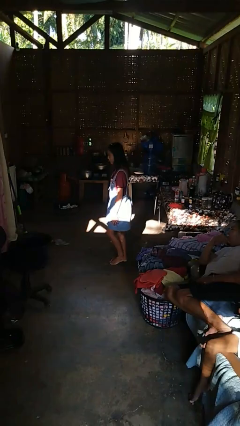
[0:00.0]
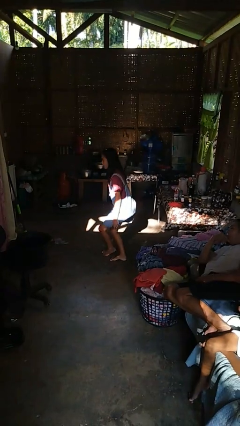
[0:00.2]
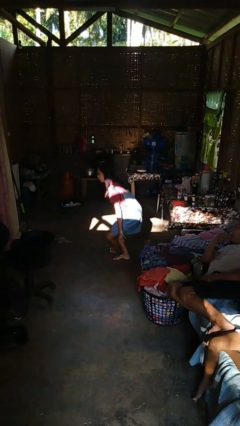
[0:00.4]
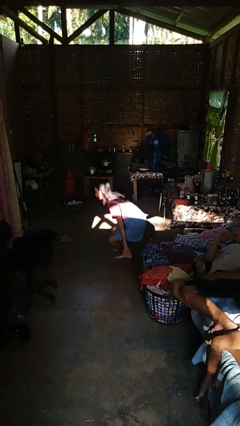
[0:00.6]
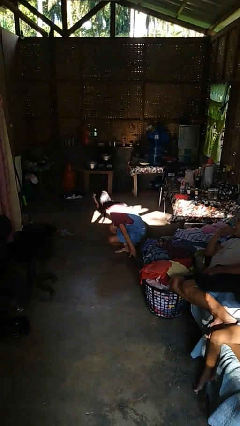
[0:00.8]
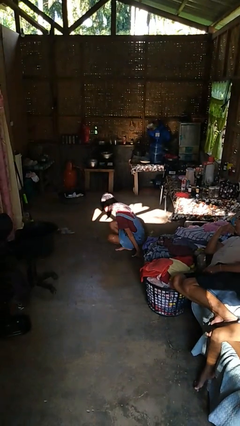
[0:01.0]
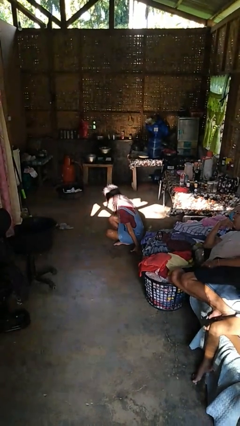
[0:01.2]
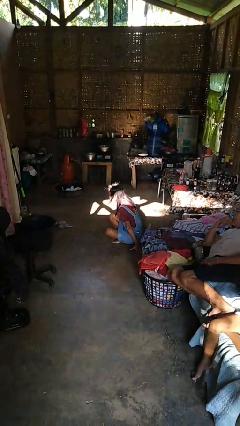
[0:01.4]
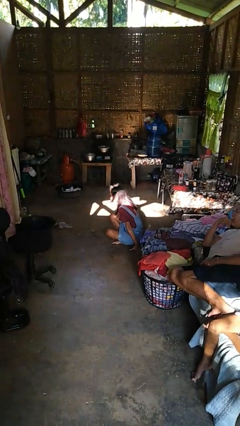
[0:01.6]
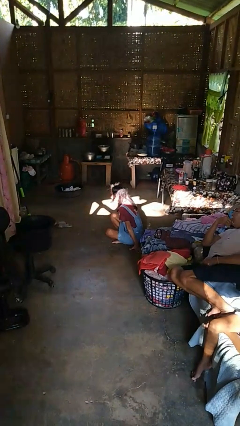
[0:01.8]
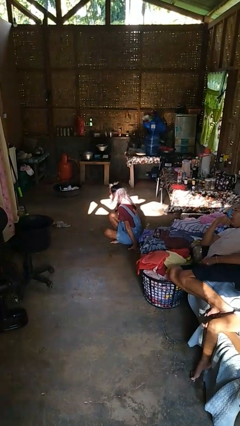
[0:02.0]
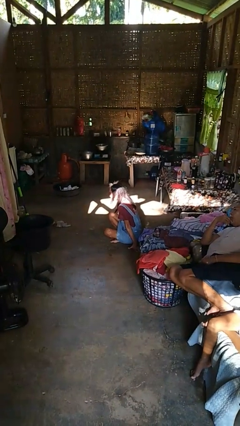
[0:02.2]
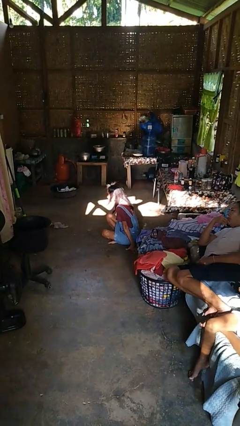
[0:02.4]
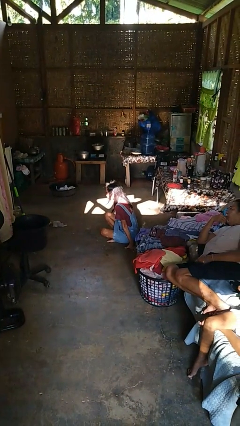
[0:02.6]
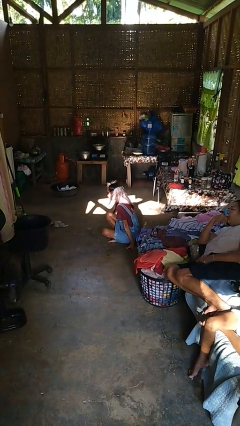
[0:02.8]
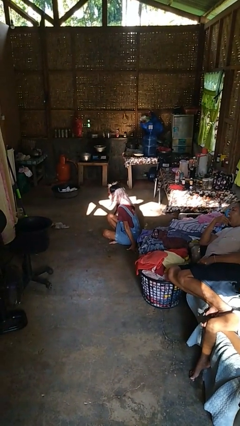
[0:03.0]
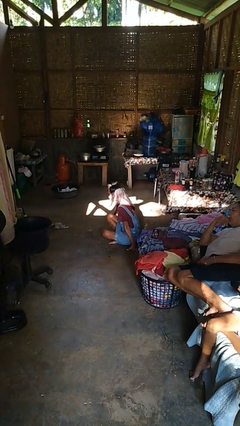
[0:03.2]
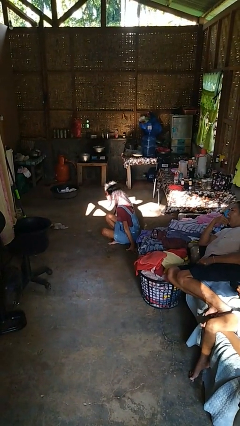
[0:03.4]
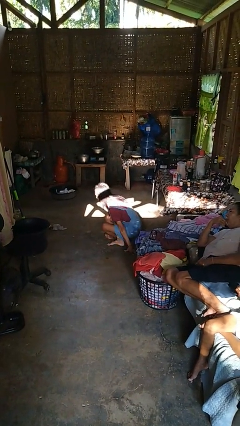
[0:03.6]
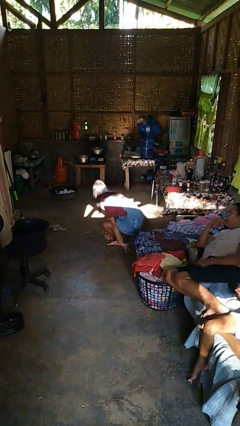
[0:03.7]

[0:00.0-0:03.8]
person sits crisscross

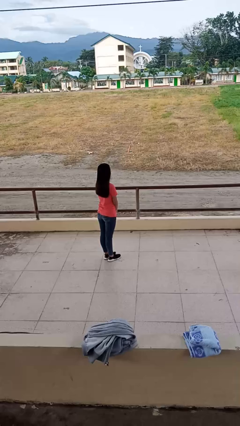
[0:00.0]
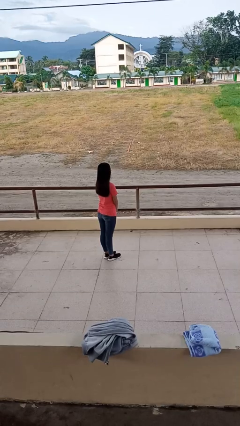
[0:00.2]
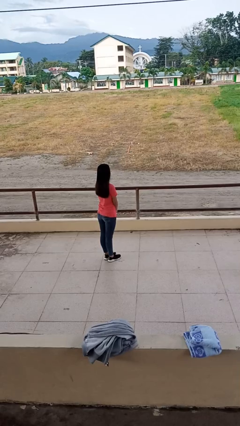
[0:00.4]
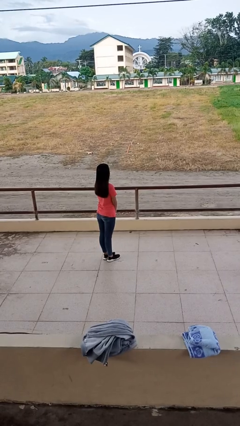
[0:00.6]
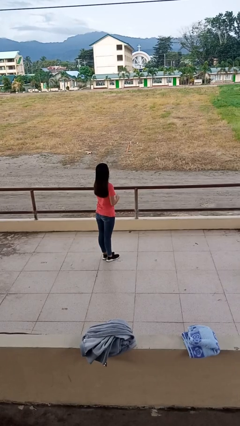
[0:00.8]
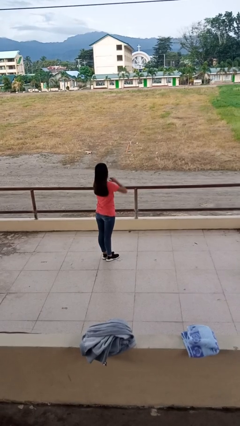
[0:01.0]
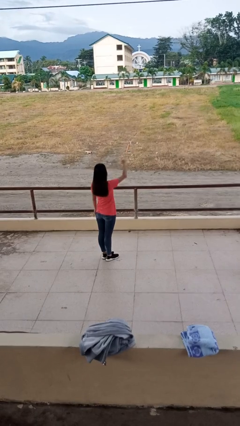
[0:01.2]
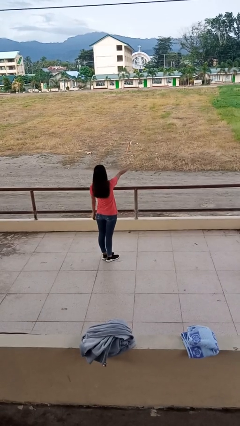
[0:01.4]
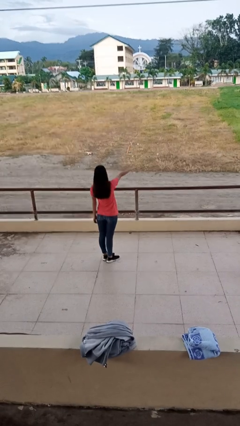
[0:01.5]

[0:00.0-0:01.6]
person punches

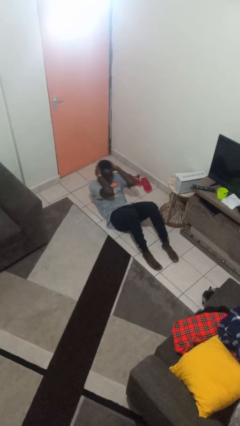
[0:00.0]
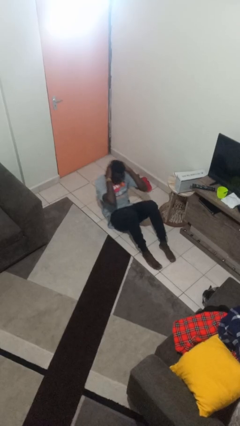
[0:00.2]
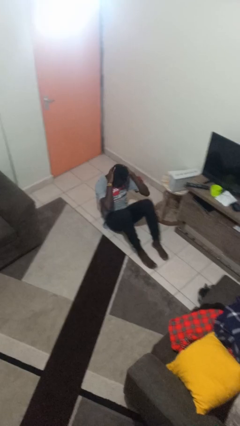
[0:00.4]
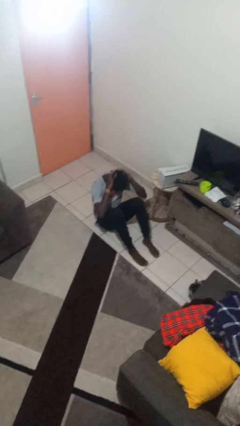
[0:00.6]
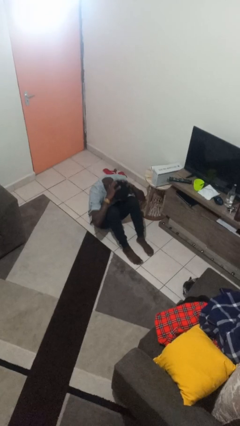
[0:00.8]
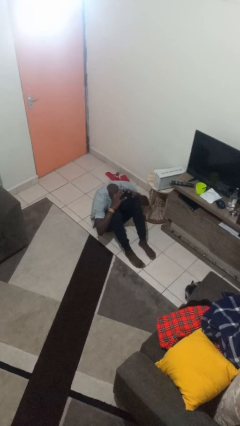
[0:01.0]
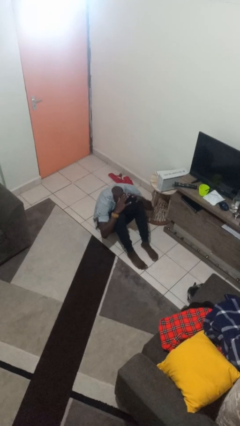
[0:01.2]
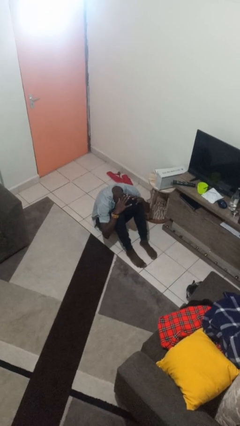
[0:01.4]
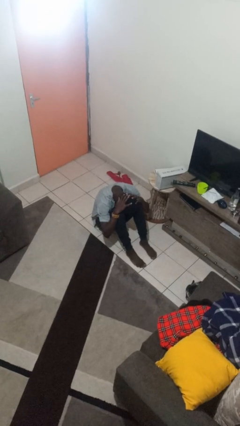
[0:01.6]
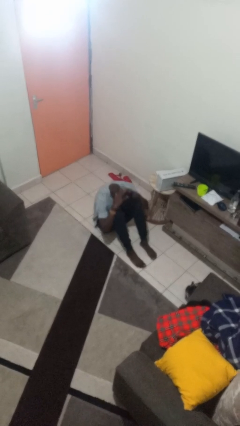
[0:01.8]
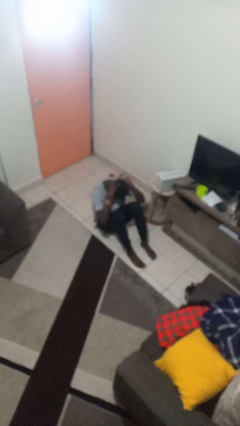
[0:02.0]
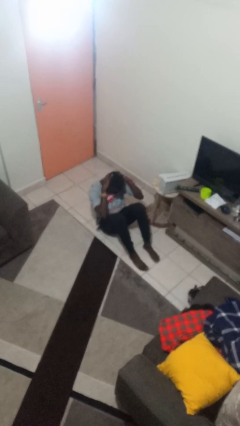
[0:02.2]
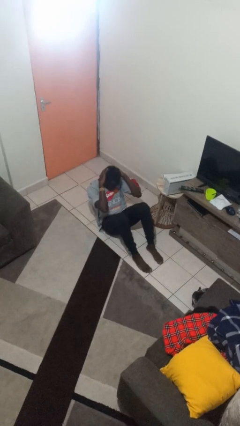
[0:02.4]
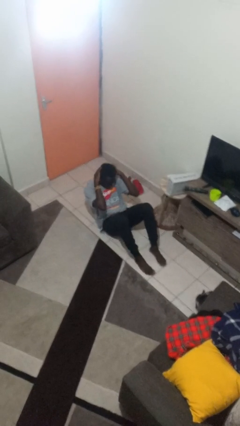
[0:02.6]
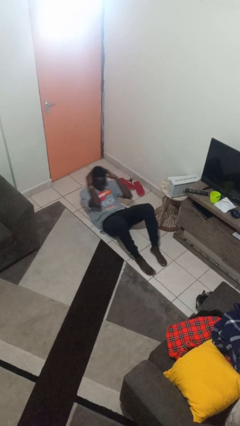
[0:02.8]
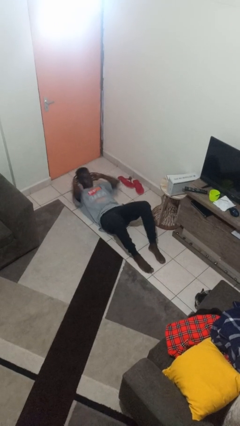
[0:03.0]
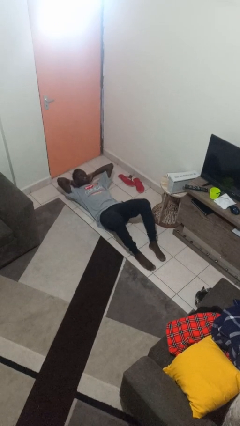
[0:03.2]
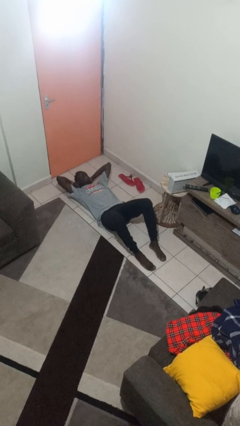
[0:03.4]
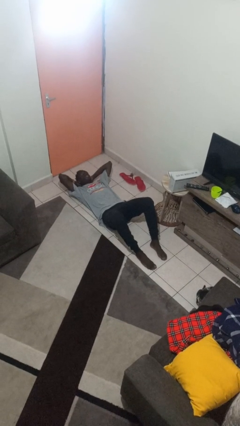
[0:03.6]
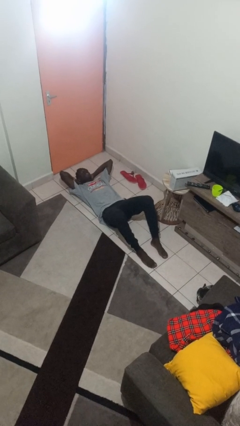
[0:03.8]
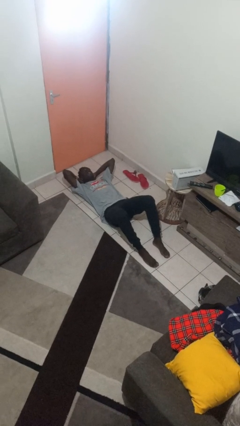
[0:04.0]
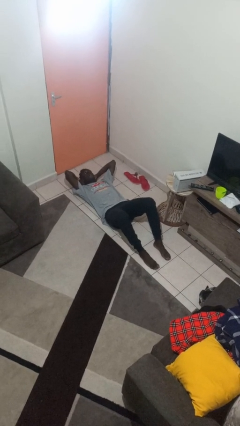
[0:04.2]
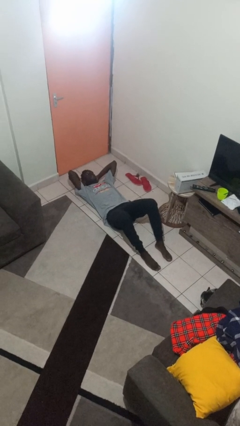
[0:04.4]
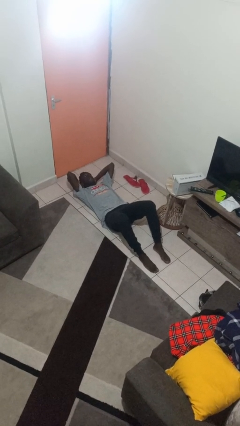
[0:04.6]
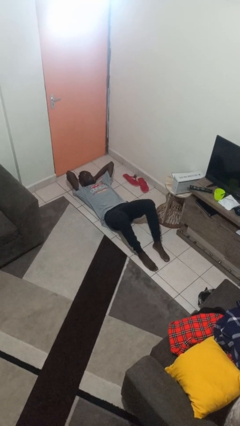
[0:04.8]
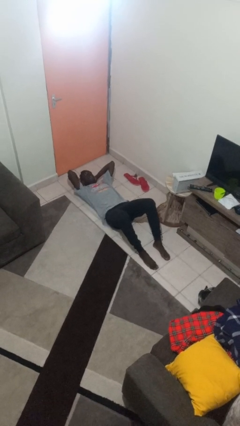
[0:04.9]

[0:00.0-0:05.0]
person exercises with situp

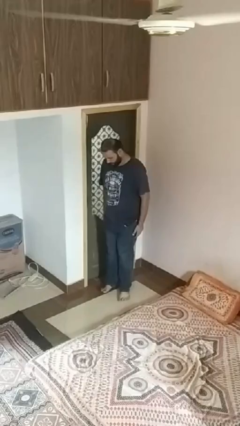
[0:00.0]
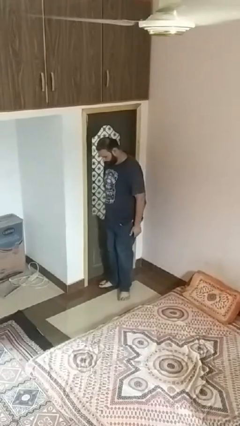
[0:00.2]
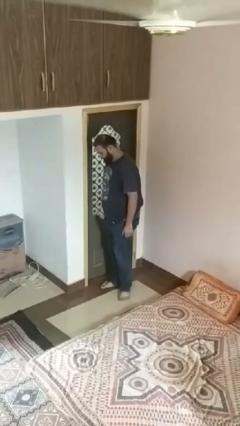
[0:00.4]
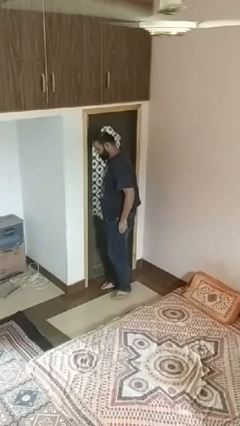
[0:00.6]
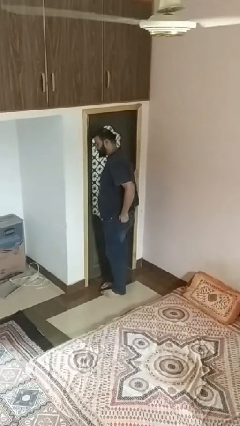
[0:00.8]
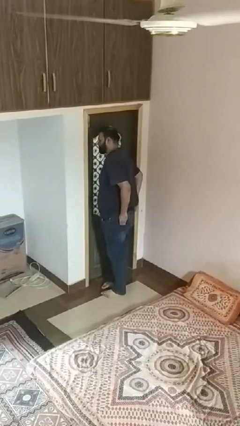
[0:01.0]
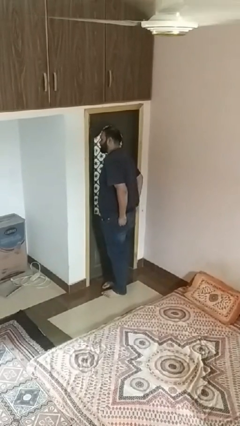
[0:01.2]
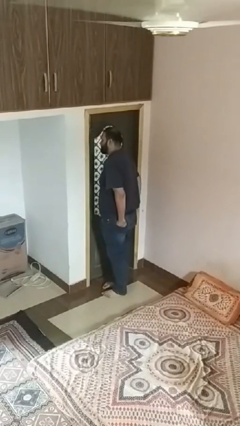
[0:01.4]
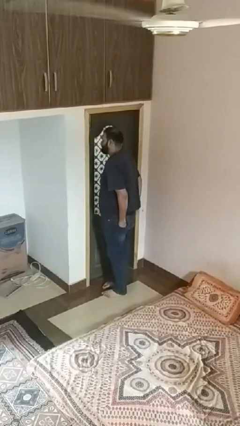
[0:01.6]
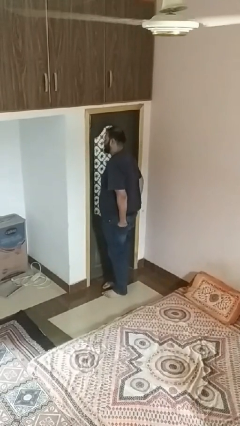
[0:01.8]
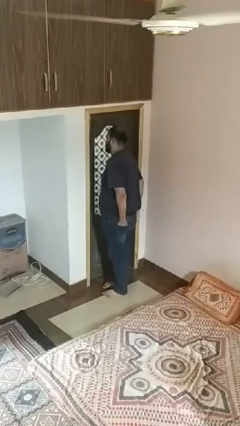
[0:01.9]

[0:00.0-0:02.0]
person puts hands in back pockets

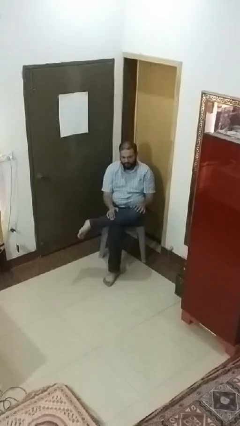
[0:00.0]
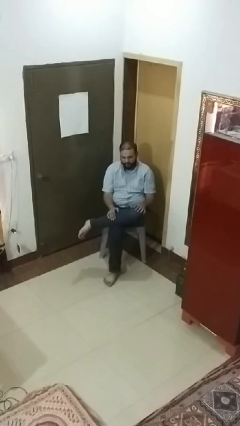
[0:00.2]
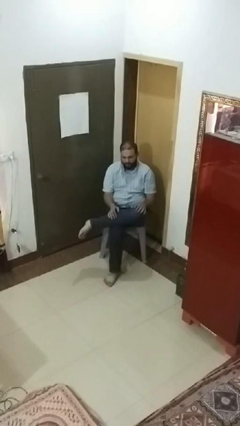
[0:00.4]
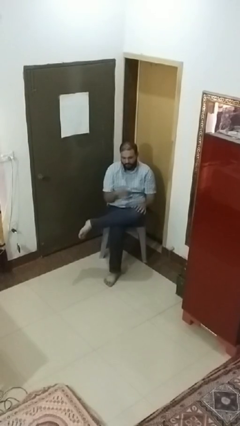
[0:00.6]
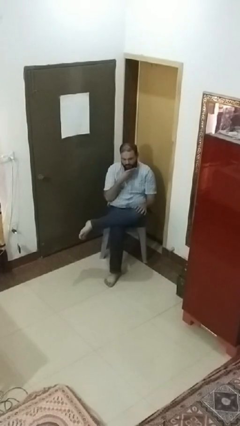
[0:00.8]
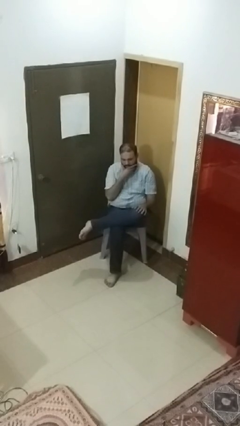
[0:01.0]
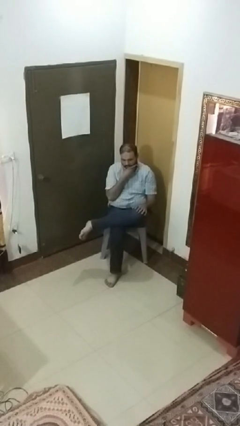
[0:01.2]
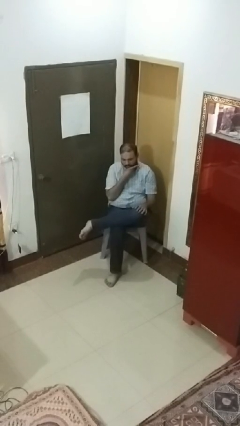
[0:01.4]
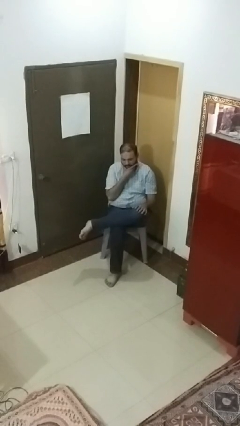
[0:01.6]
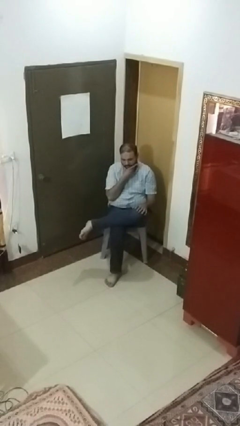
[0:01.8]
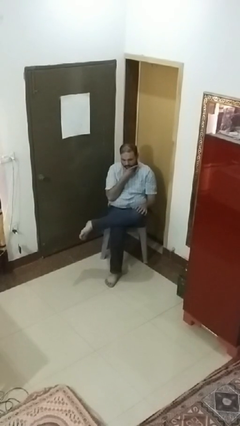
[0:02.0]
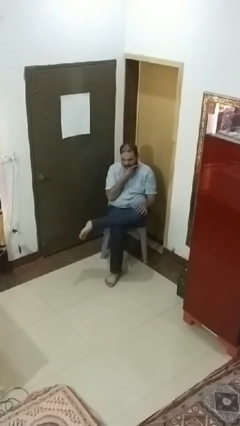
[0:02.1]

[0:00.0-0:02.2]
person strokes chin

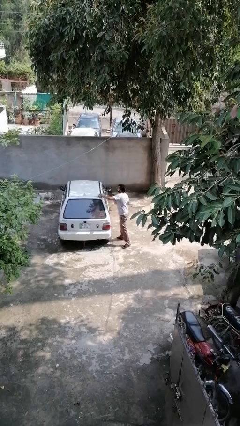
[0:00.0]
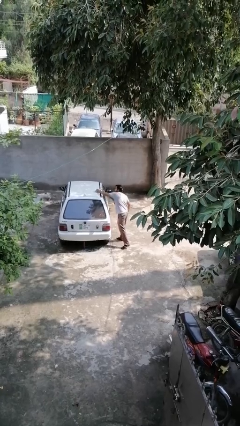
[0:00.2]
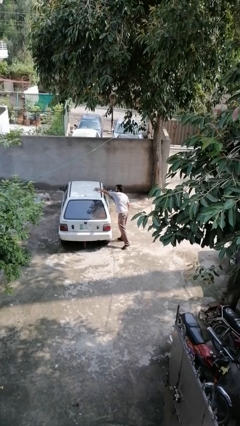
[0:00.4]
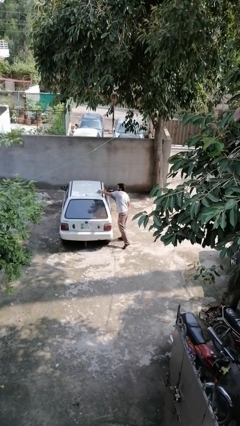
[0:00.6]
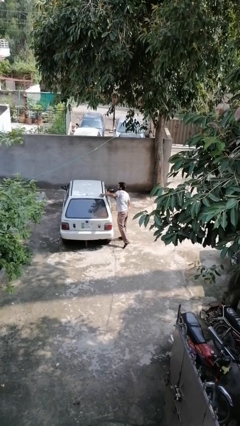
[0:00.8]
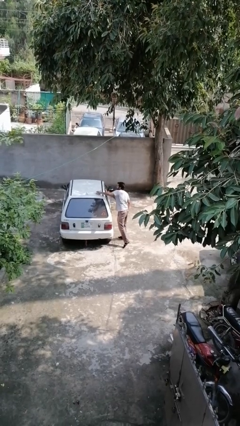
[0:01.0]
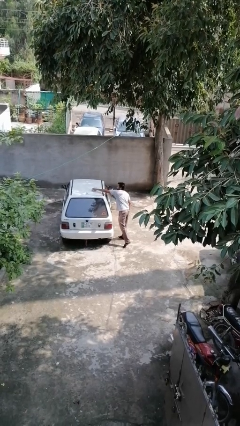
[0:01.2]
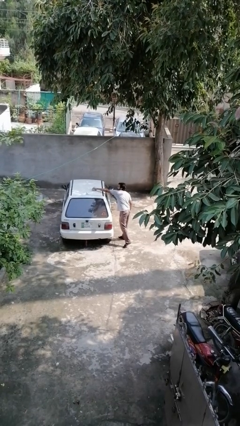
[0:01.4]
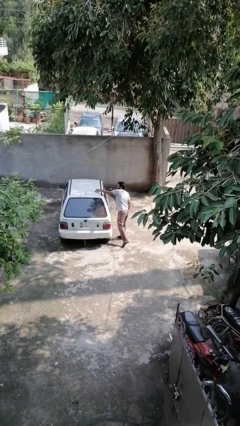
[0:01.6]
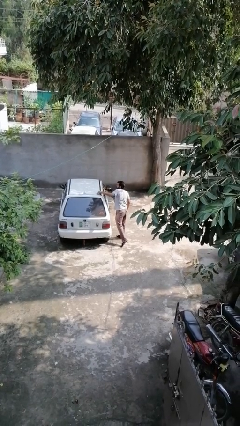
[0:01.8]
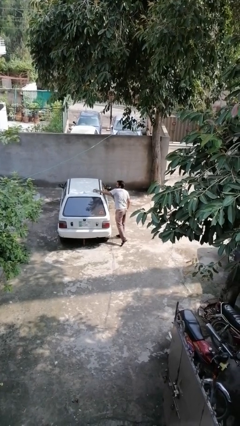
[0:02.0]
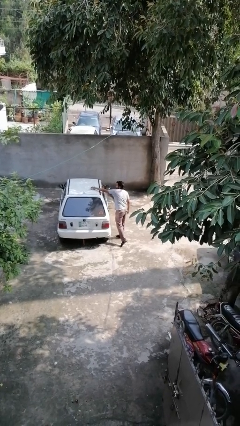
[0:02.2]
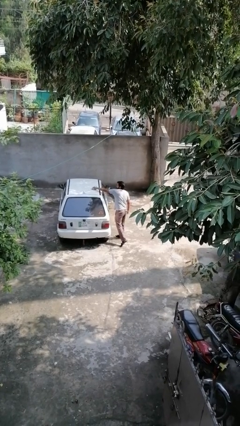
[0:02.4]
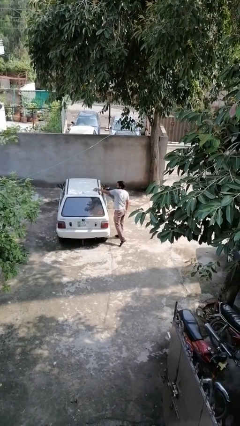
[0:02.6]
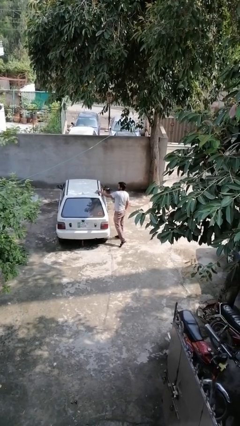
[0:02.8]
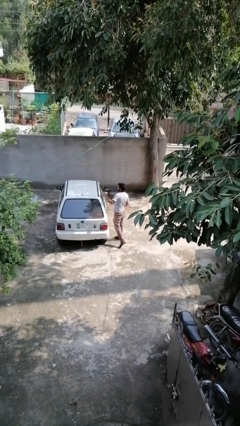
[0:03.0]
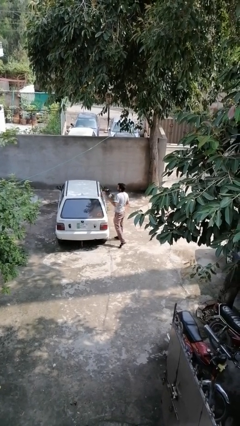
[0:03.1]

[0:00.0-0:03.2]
person polishes car with rag
